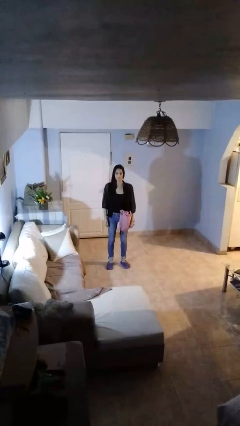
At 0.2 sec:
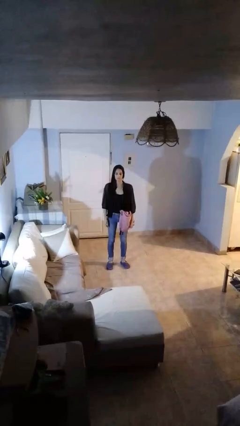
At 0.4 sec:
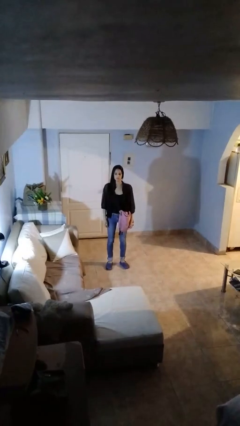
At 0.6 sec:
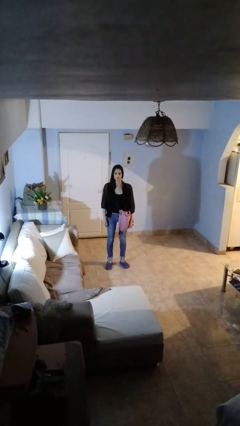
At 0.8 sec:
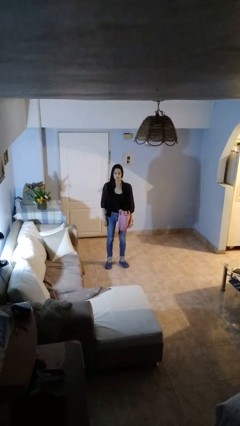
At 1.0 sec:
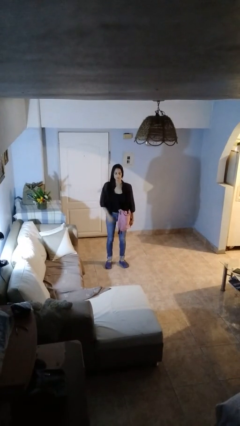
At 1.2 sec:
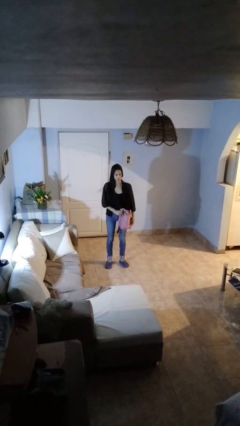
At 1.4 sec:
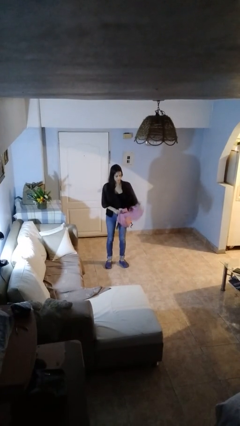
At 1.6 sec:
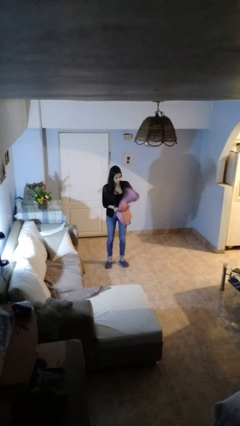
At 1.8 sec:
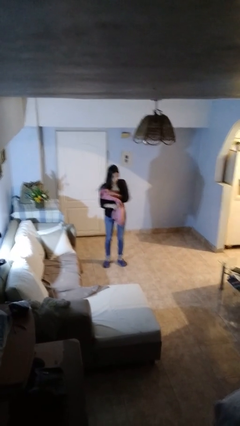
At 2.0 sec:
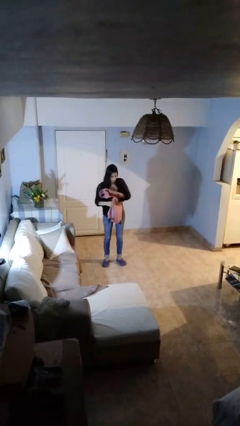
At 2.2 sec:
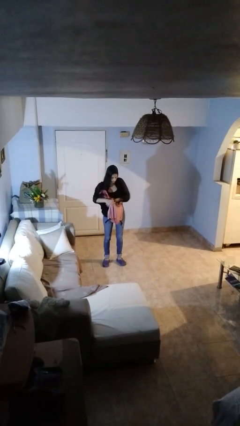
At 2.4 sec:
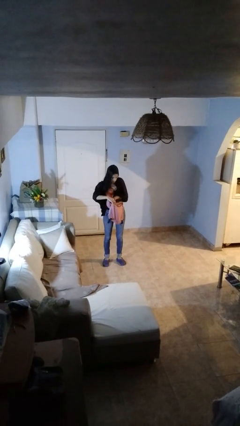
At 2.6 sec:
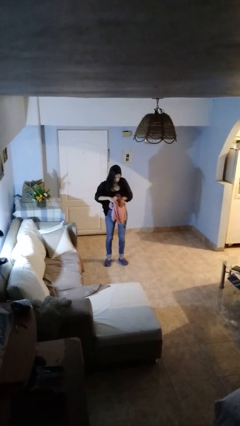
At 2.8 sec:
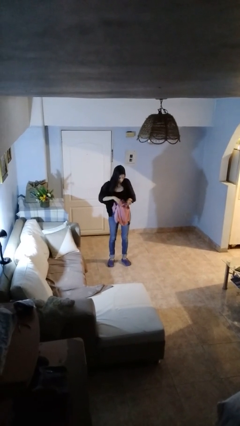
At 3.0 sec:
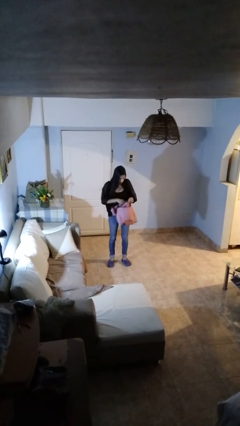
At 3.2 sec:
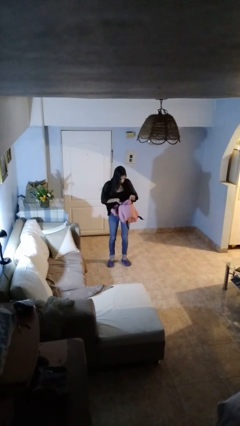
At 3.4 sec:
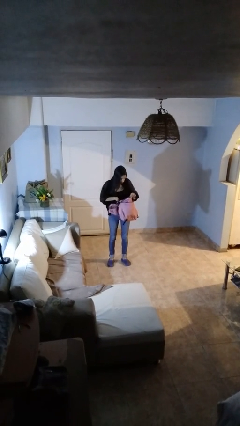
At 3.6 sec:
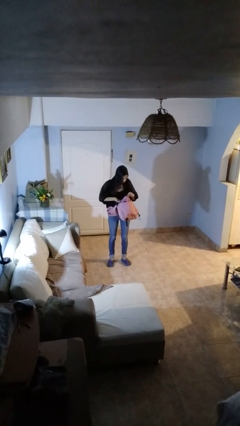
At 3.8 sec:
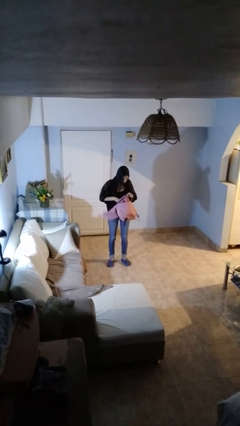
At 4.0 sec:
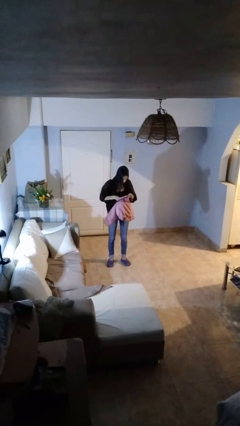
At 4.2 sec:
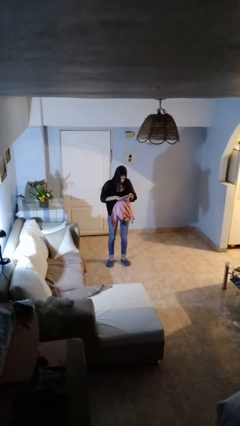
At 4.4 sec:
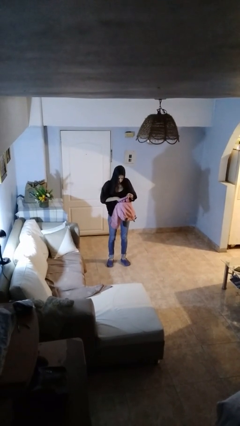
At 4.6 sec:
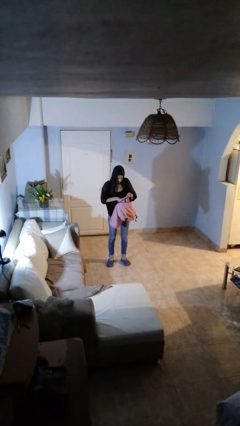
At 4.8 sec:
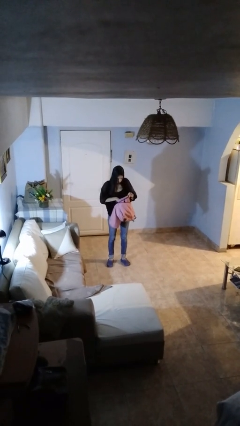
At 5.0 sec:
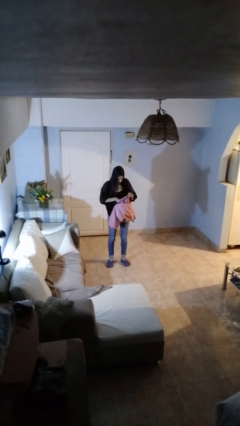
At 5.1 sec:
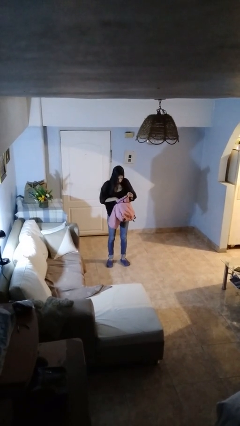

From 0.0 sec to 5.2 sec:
person searches in backpack

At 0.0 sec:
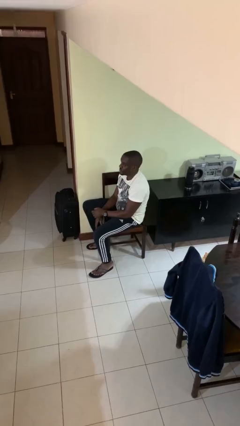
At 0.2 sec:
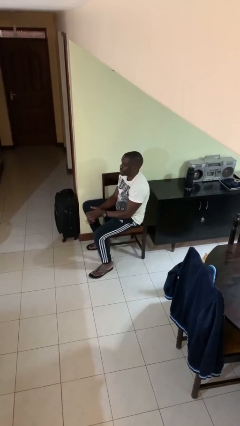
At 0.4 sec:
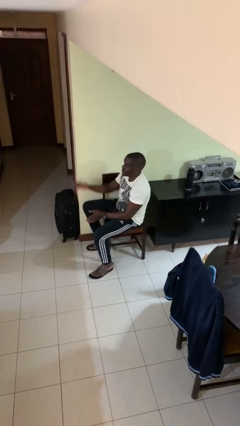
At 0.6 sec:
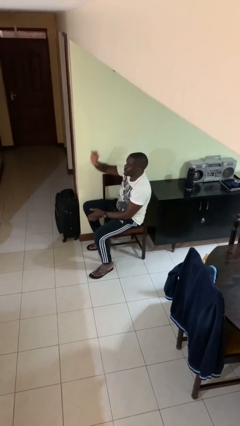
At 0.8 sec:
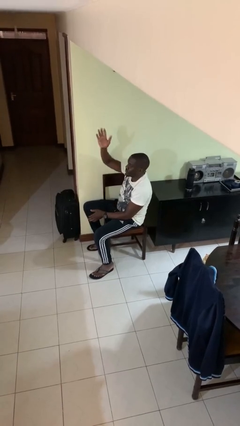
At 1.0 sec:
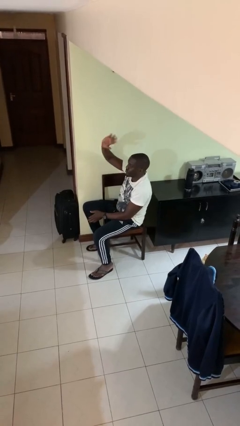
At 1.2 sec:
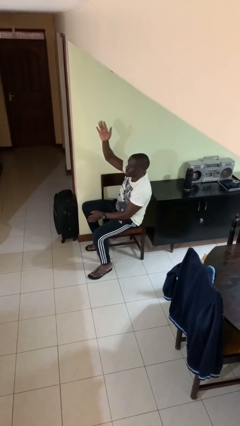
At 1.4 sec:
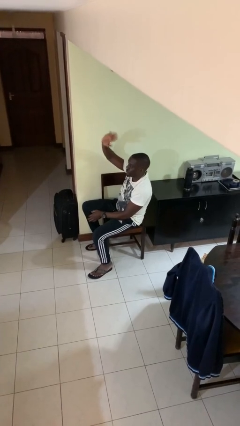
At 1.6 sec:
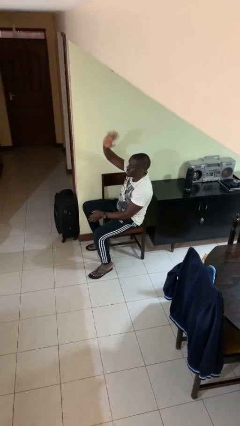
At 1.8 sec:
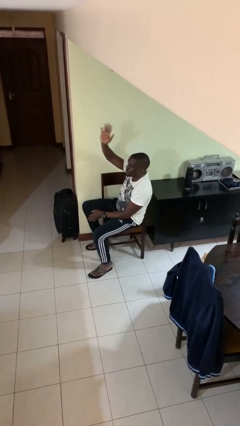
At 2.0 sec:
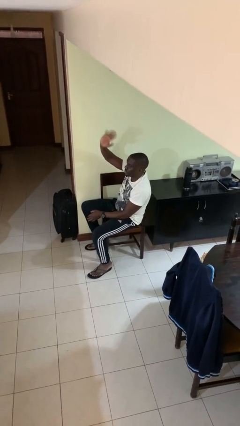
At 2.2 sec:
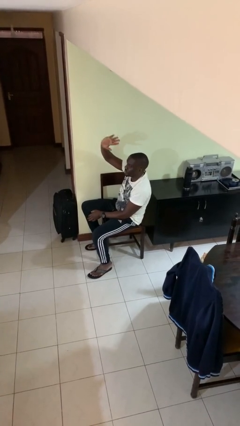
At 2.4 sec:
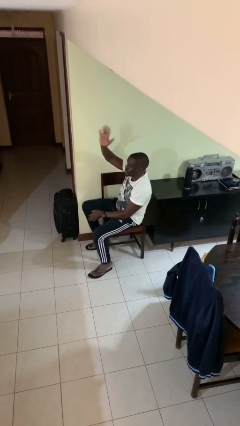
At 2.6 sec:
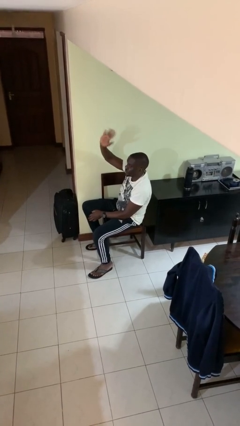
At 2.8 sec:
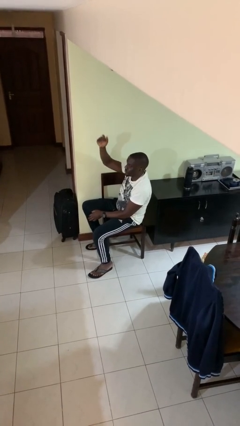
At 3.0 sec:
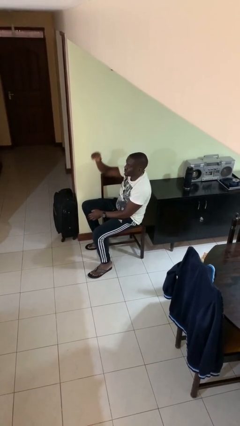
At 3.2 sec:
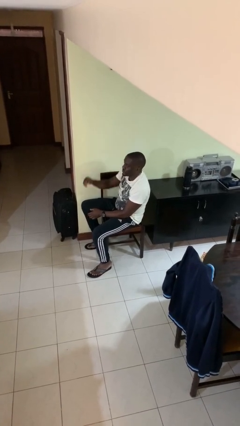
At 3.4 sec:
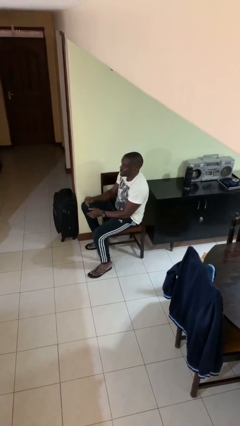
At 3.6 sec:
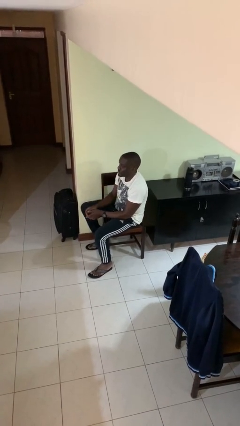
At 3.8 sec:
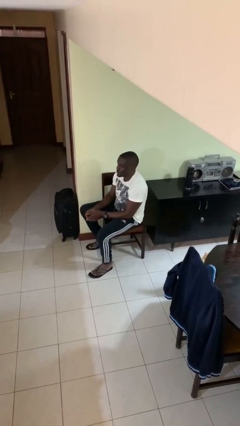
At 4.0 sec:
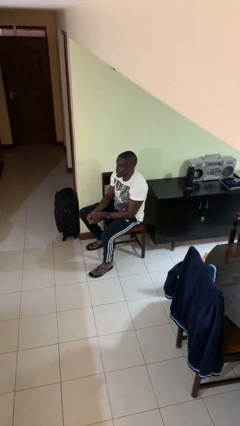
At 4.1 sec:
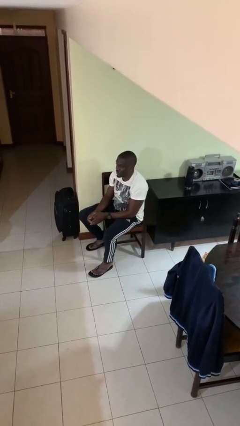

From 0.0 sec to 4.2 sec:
person waves at person

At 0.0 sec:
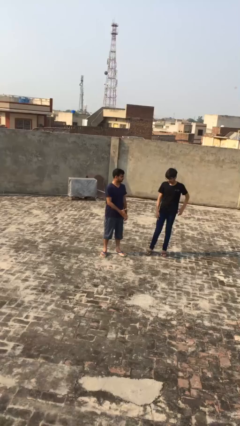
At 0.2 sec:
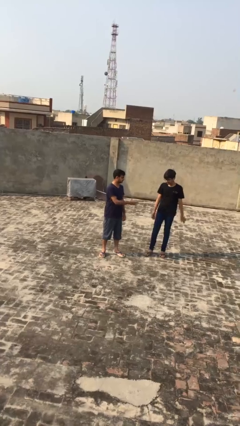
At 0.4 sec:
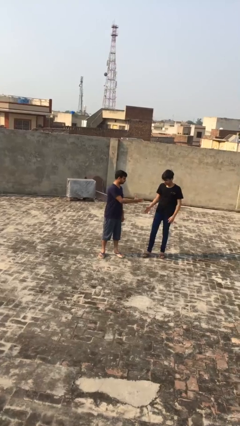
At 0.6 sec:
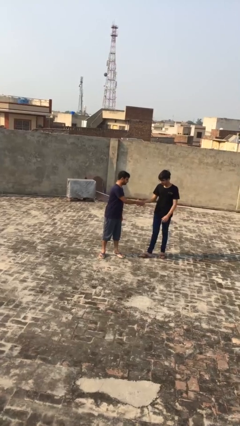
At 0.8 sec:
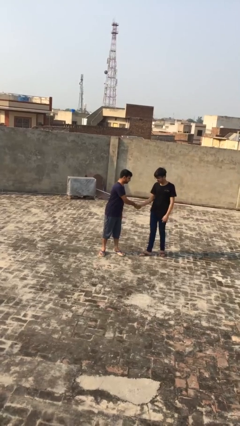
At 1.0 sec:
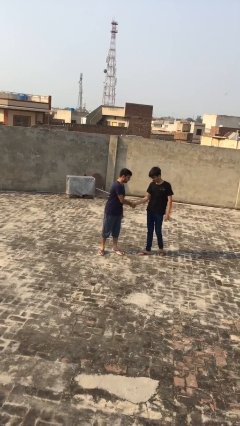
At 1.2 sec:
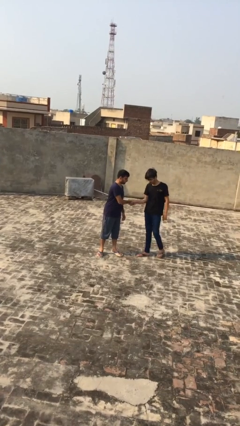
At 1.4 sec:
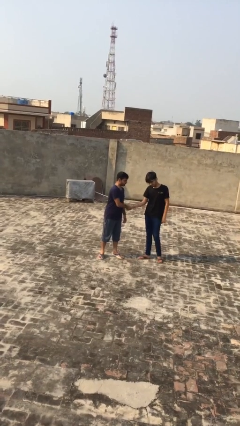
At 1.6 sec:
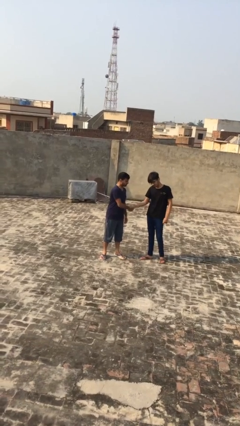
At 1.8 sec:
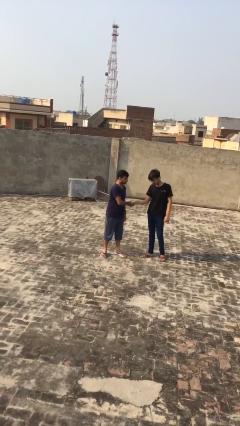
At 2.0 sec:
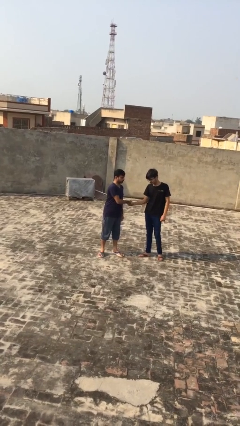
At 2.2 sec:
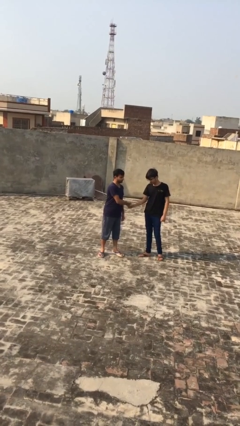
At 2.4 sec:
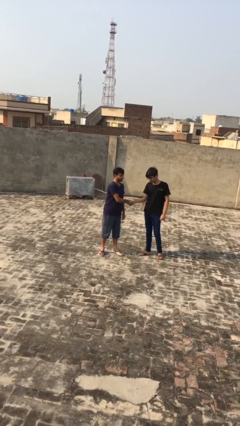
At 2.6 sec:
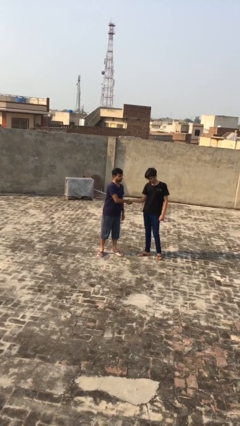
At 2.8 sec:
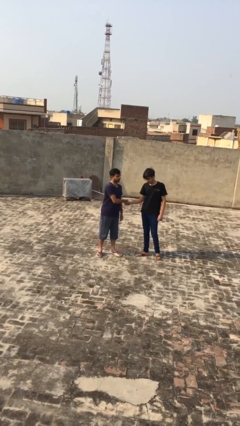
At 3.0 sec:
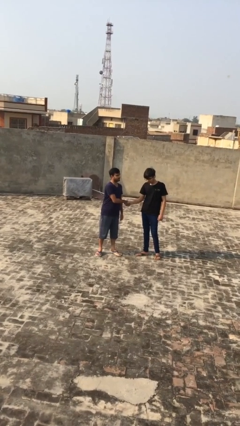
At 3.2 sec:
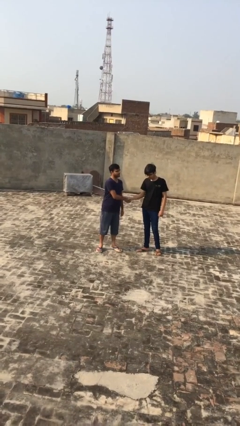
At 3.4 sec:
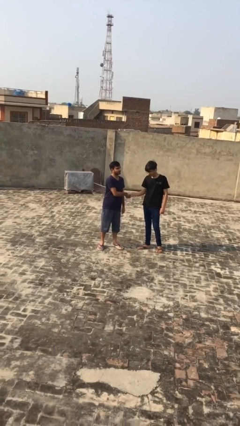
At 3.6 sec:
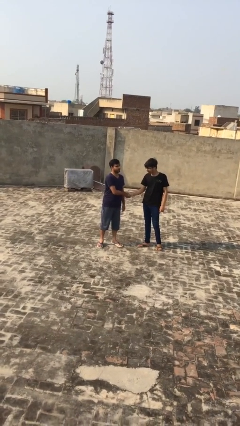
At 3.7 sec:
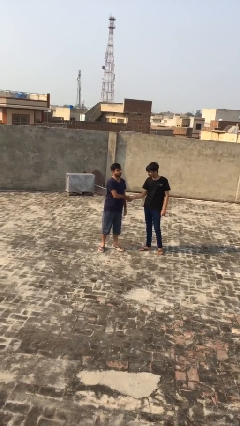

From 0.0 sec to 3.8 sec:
person shakes hand

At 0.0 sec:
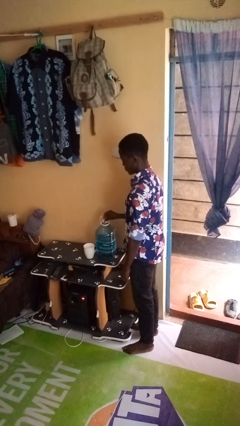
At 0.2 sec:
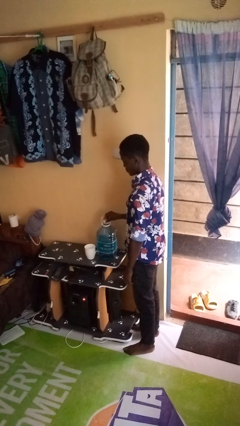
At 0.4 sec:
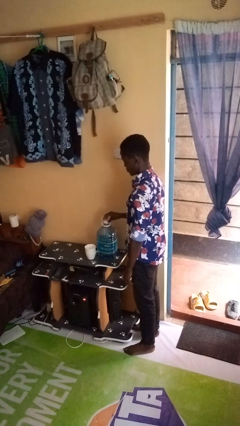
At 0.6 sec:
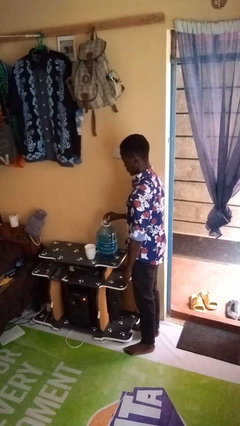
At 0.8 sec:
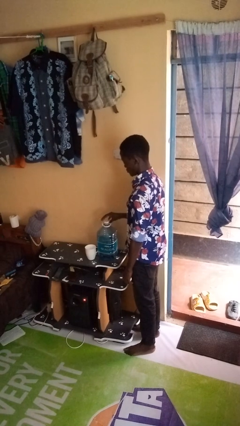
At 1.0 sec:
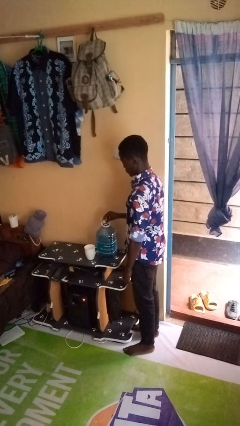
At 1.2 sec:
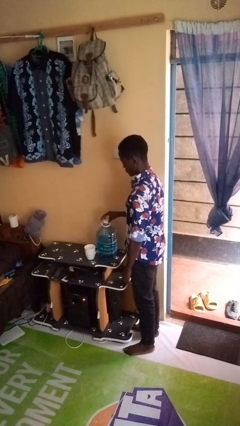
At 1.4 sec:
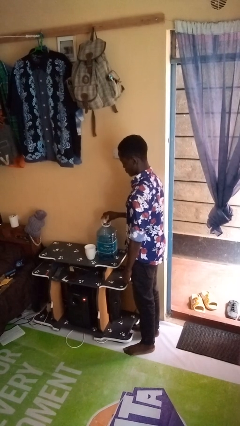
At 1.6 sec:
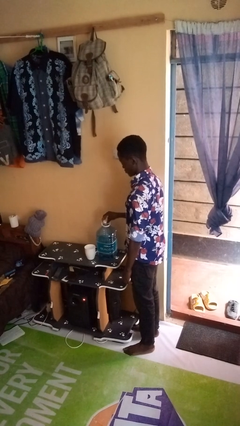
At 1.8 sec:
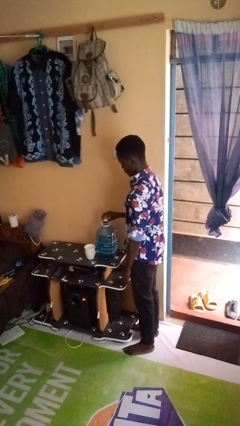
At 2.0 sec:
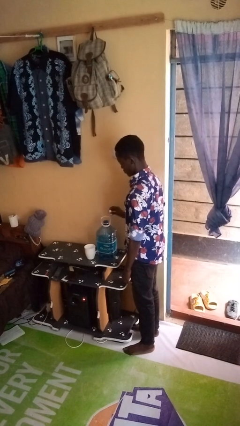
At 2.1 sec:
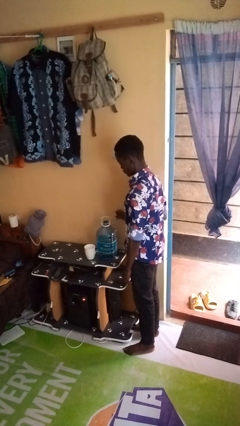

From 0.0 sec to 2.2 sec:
person unscrews lid from bottle

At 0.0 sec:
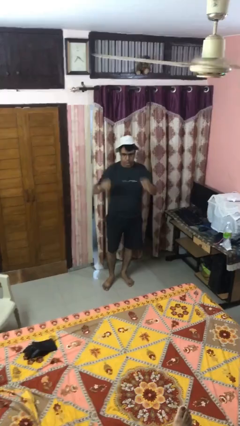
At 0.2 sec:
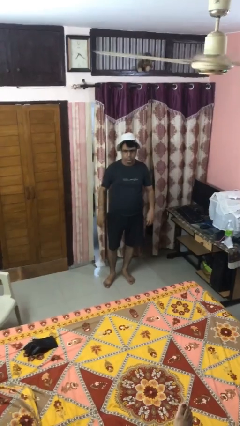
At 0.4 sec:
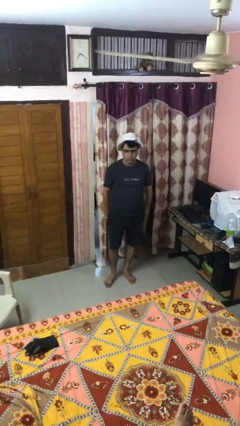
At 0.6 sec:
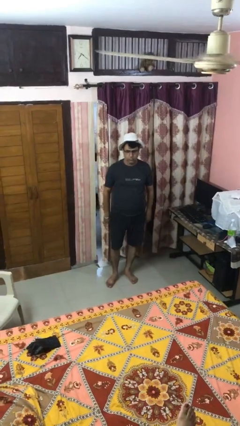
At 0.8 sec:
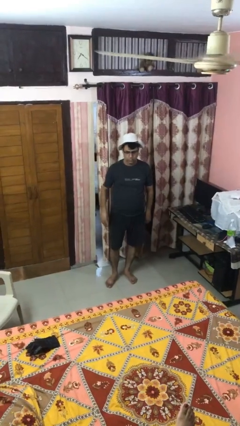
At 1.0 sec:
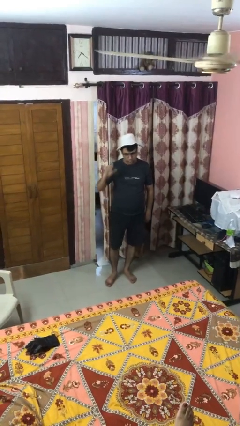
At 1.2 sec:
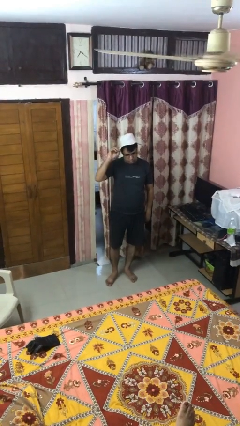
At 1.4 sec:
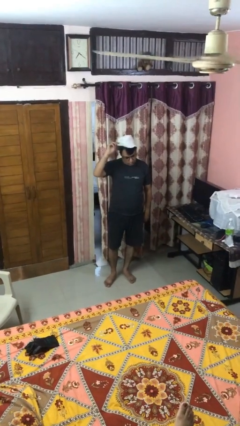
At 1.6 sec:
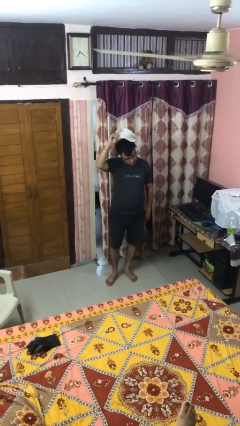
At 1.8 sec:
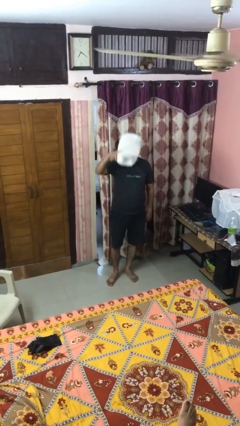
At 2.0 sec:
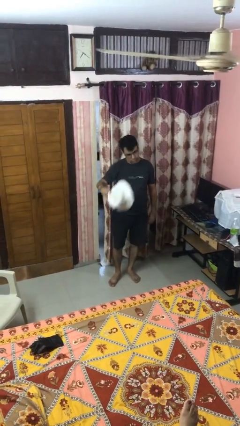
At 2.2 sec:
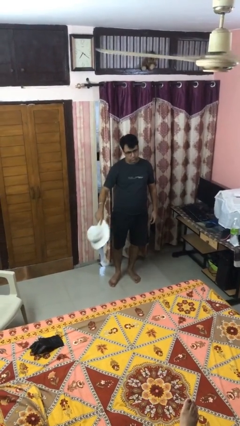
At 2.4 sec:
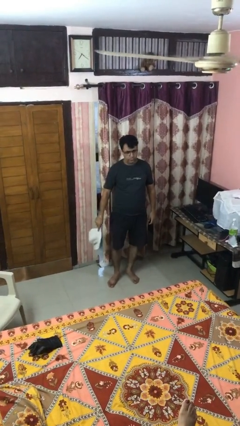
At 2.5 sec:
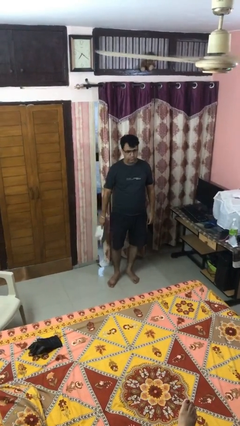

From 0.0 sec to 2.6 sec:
person takes off hat
